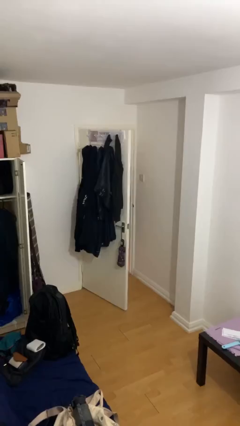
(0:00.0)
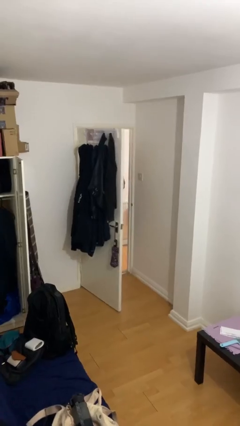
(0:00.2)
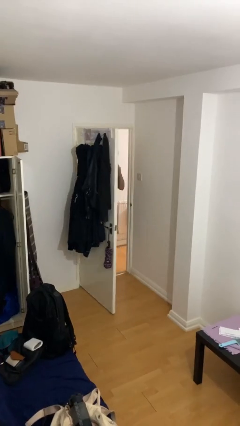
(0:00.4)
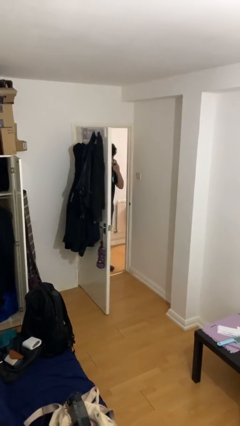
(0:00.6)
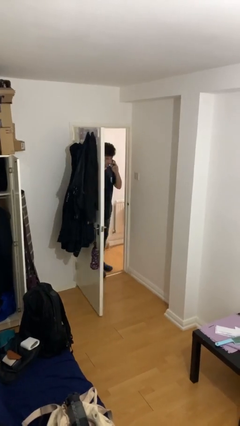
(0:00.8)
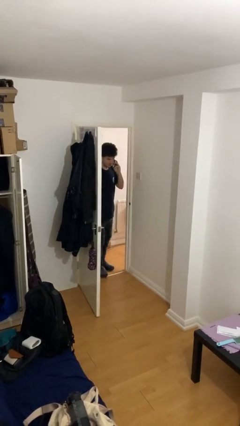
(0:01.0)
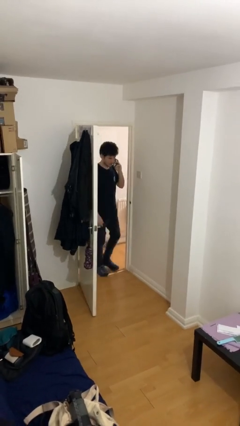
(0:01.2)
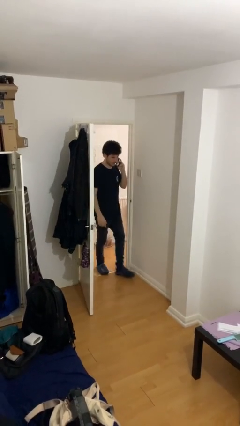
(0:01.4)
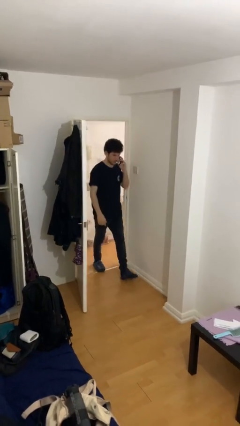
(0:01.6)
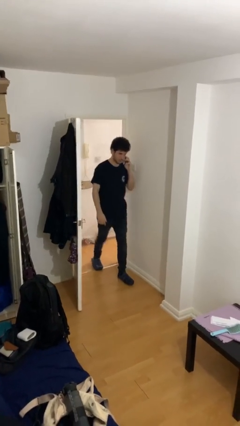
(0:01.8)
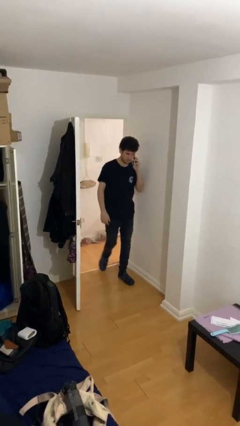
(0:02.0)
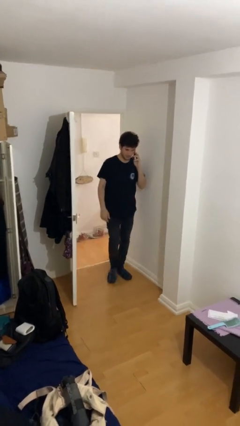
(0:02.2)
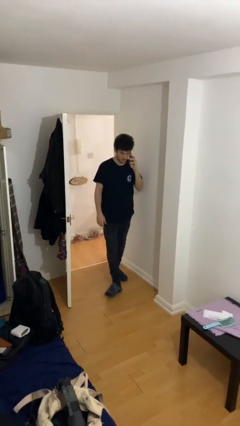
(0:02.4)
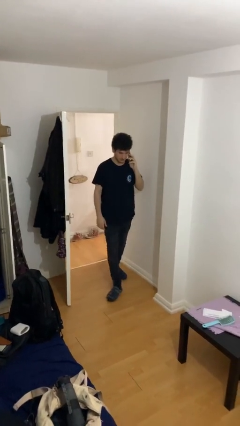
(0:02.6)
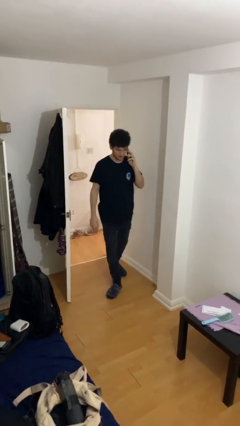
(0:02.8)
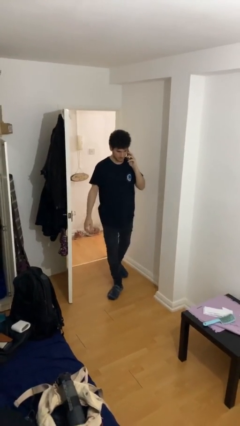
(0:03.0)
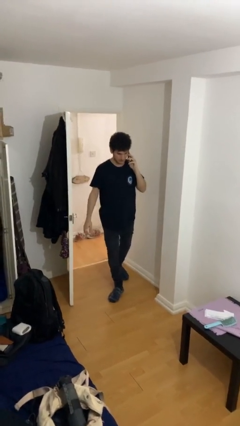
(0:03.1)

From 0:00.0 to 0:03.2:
person enters scene through structure

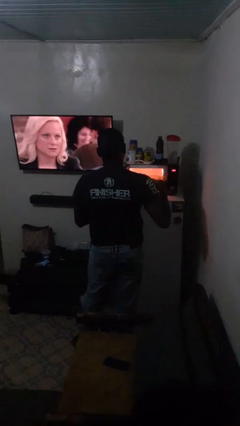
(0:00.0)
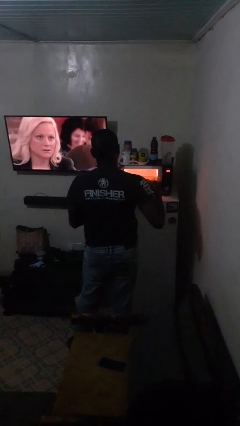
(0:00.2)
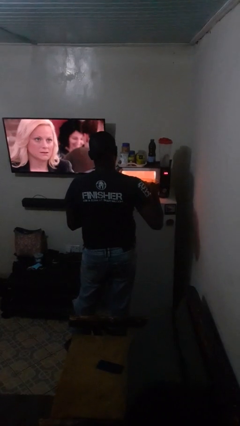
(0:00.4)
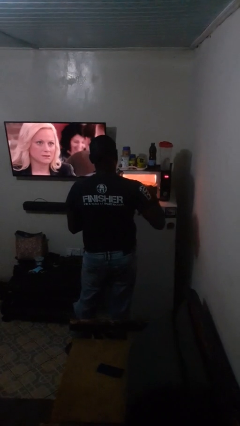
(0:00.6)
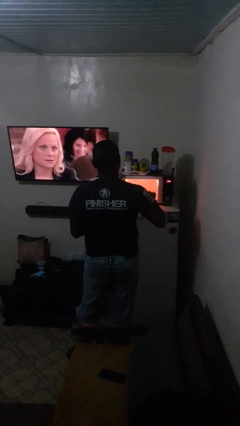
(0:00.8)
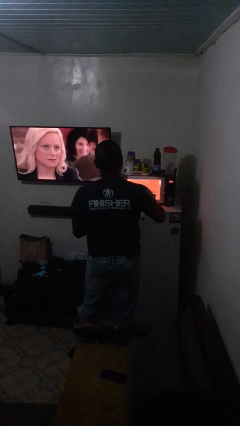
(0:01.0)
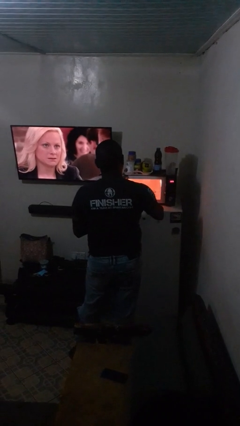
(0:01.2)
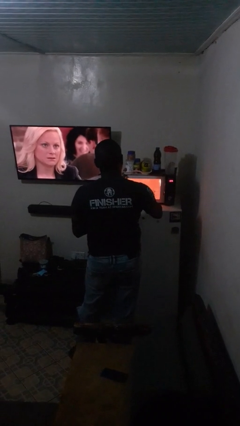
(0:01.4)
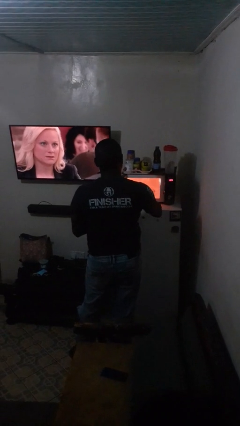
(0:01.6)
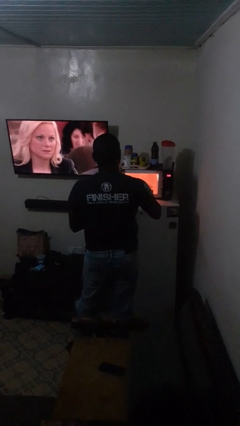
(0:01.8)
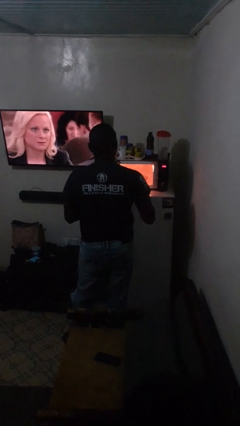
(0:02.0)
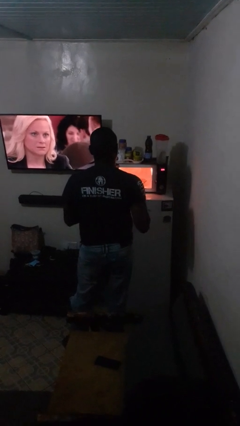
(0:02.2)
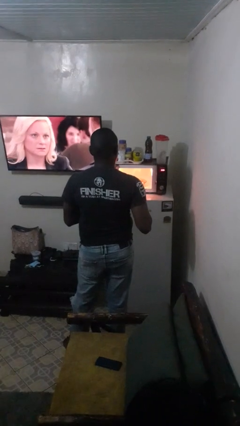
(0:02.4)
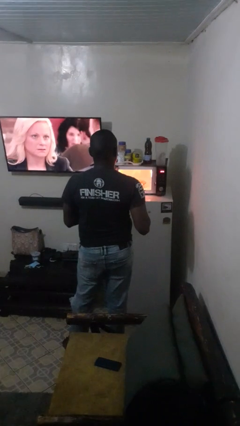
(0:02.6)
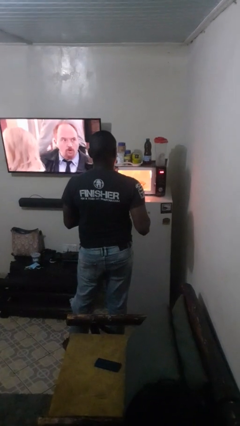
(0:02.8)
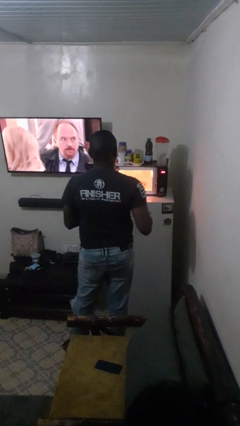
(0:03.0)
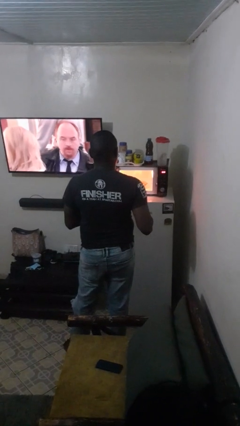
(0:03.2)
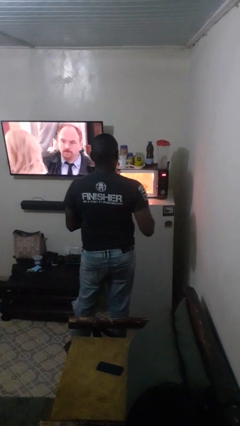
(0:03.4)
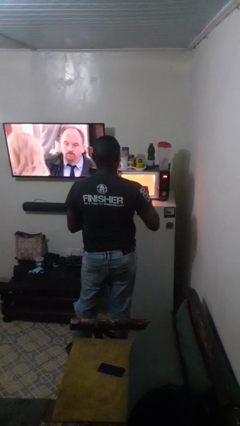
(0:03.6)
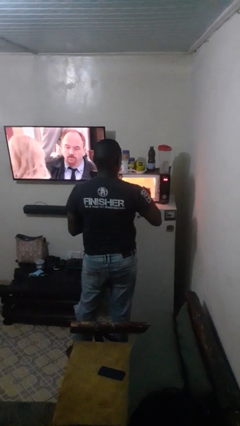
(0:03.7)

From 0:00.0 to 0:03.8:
person puts object into microwave

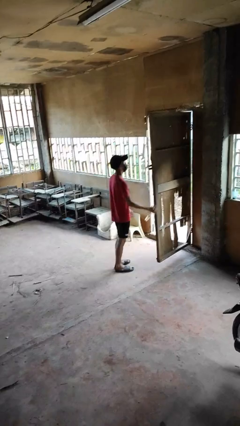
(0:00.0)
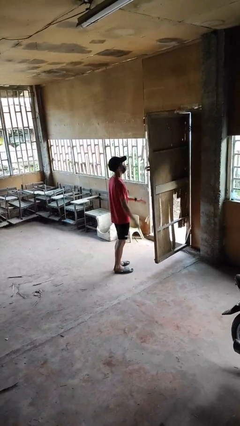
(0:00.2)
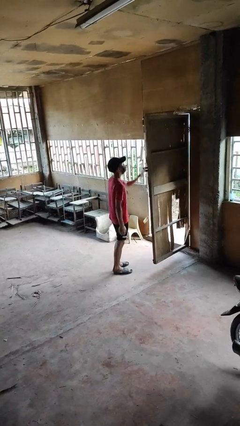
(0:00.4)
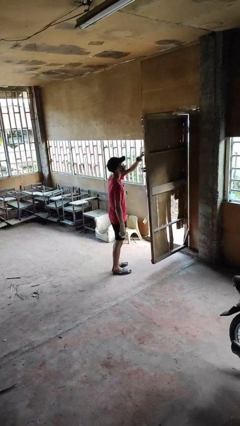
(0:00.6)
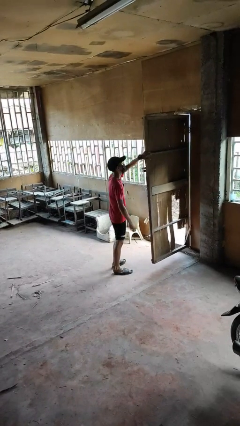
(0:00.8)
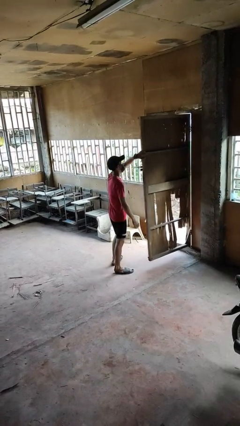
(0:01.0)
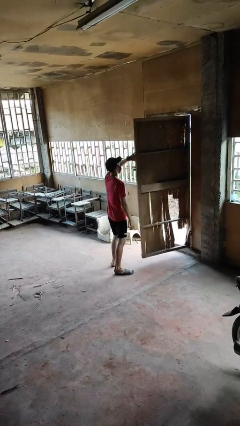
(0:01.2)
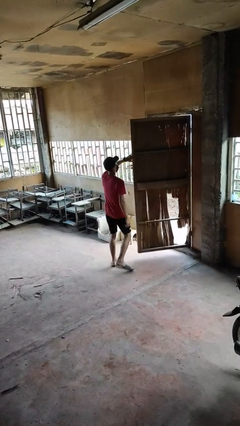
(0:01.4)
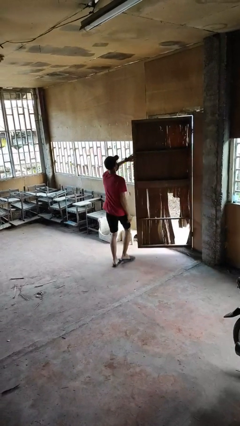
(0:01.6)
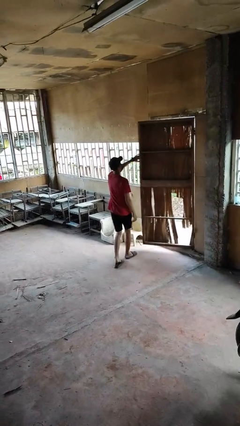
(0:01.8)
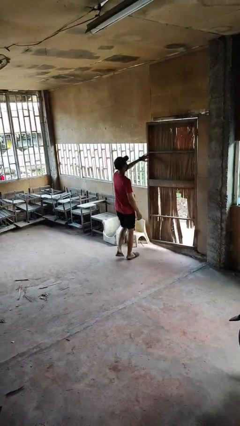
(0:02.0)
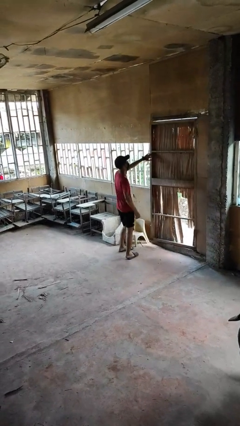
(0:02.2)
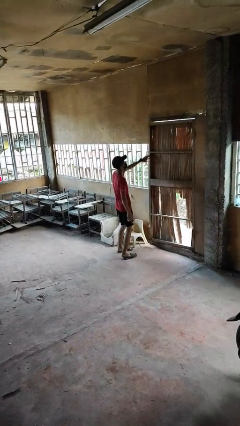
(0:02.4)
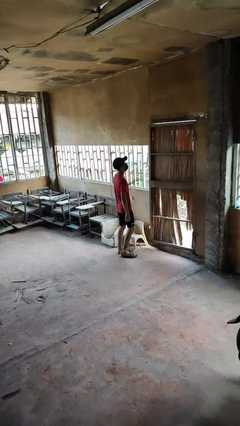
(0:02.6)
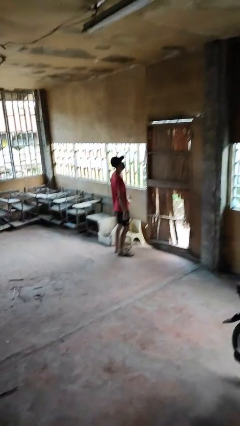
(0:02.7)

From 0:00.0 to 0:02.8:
person closes facility door

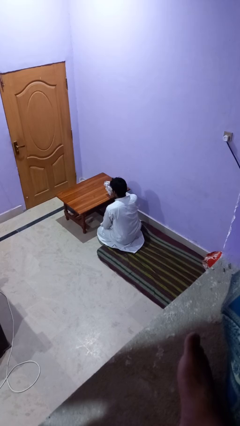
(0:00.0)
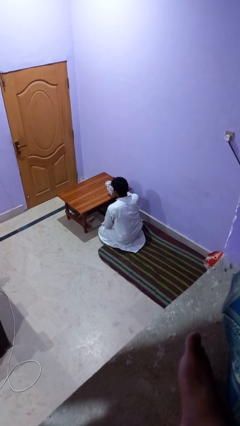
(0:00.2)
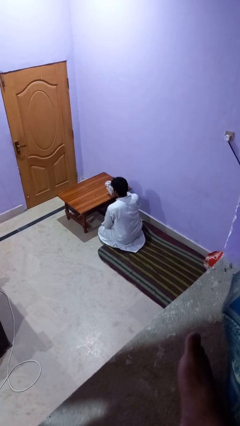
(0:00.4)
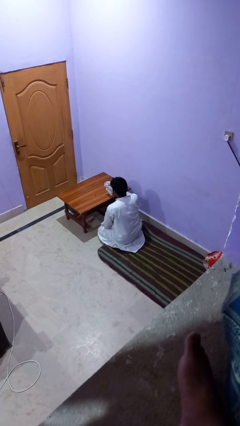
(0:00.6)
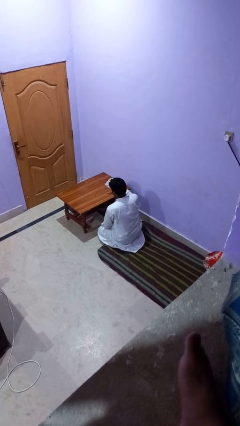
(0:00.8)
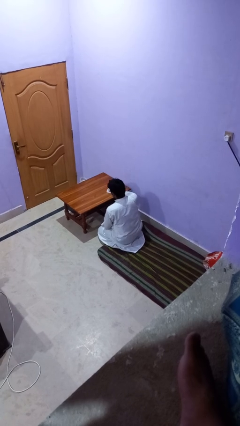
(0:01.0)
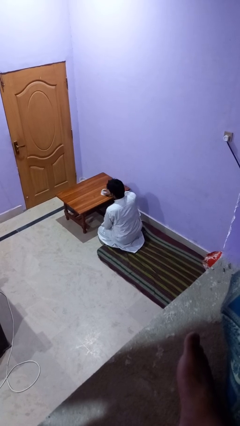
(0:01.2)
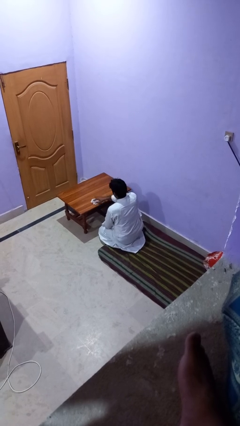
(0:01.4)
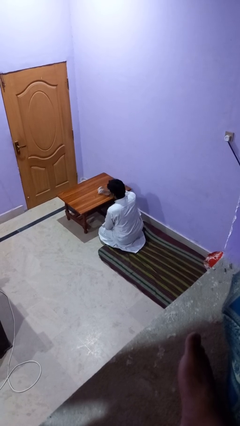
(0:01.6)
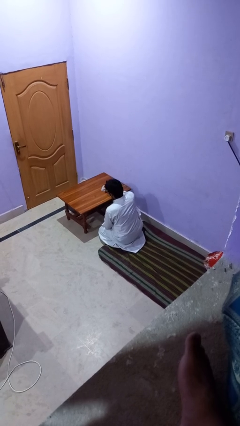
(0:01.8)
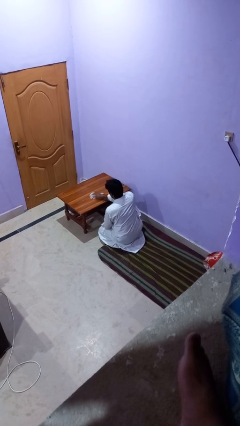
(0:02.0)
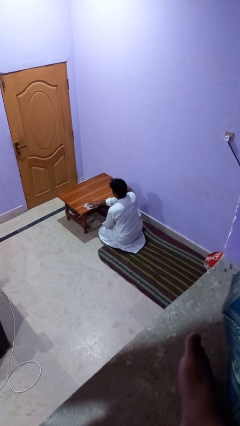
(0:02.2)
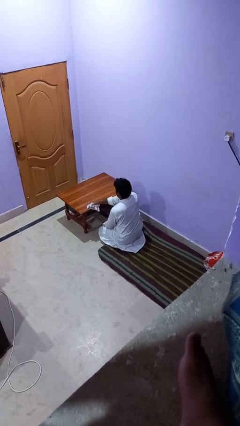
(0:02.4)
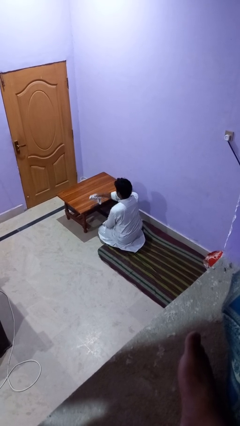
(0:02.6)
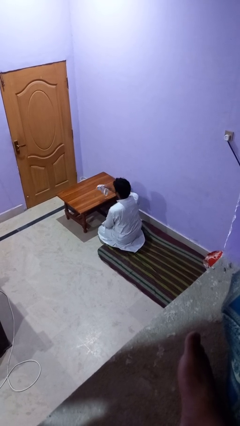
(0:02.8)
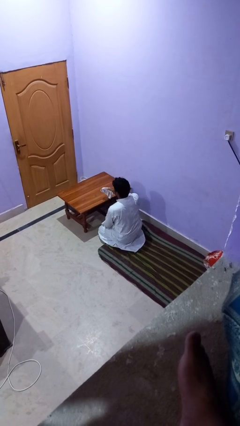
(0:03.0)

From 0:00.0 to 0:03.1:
person cleans table with rag

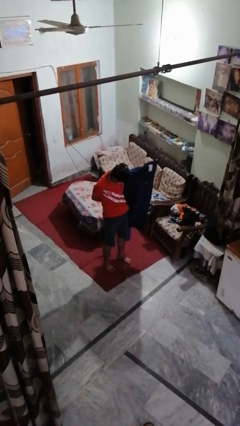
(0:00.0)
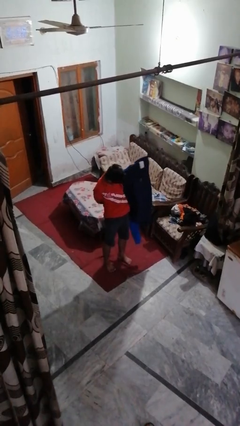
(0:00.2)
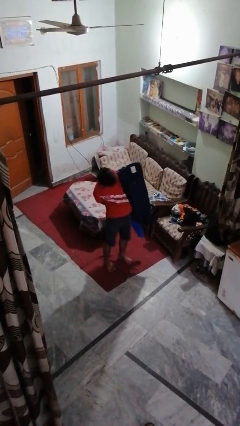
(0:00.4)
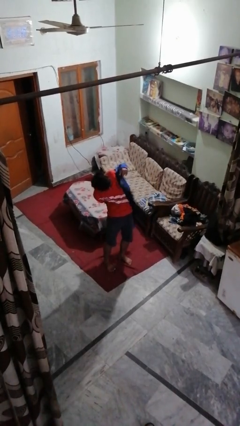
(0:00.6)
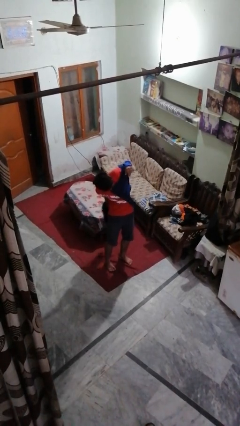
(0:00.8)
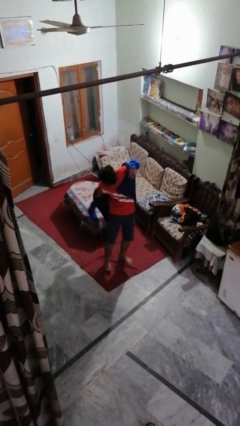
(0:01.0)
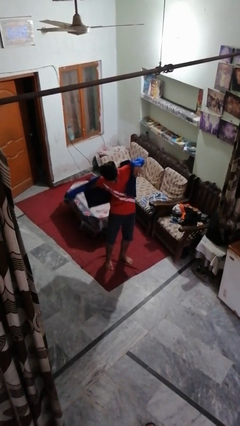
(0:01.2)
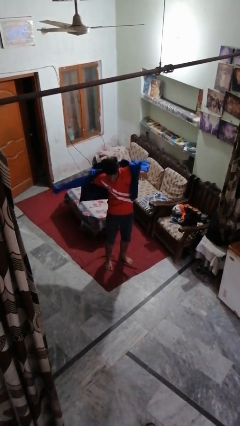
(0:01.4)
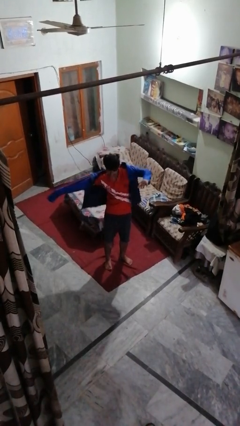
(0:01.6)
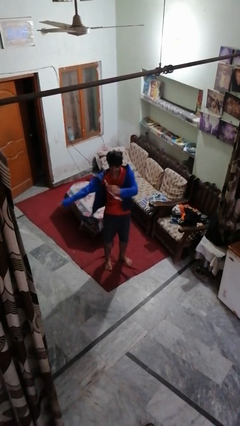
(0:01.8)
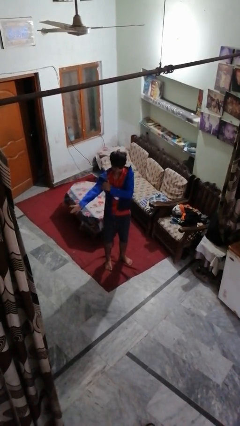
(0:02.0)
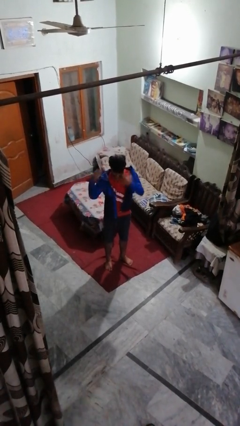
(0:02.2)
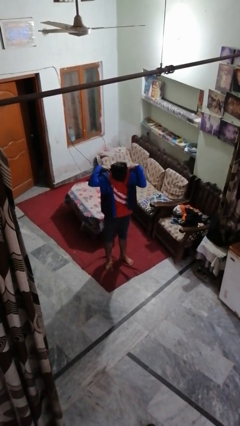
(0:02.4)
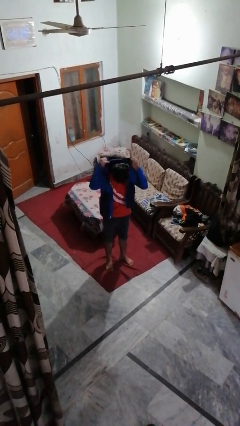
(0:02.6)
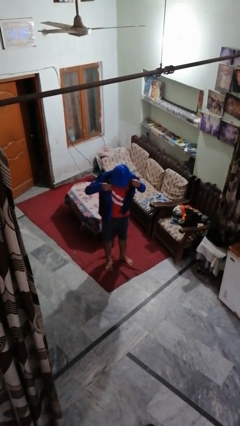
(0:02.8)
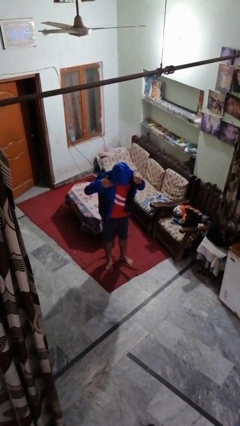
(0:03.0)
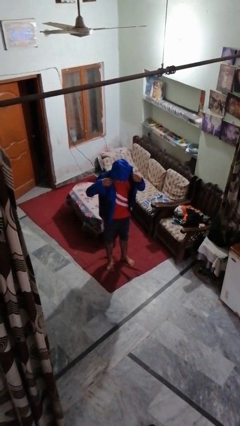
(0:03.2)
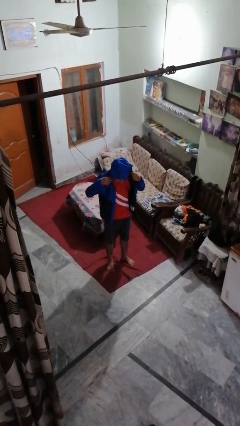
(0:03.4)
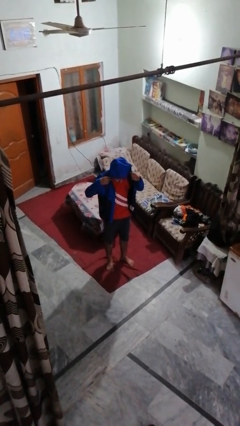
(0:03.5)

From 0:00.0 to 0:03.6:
person puts on hoodie

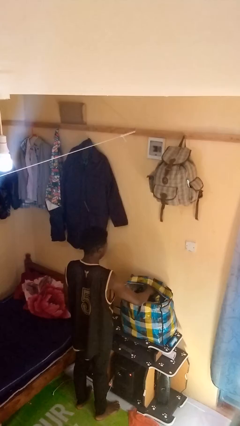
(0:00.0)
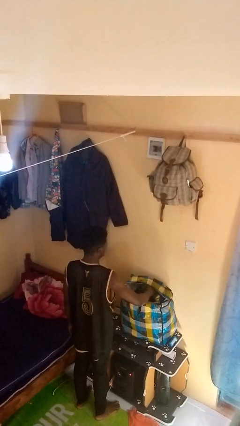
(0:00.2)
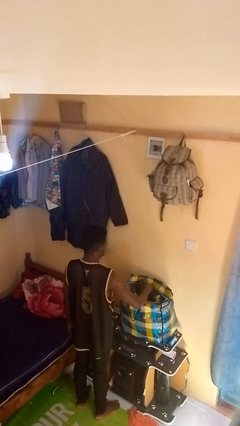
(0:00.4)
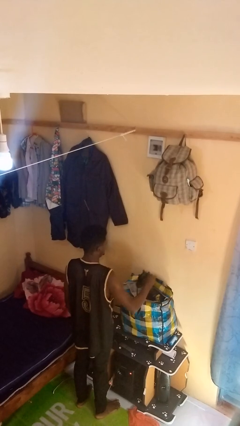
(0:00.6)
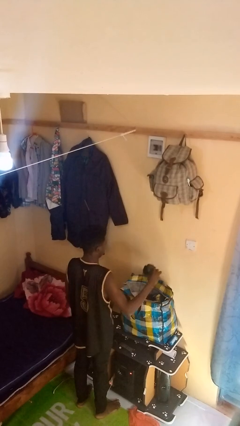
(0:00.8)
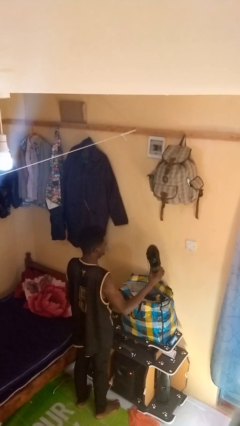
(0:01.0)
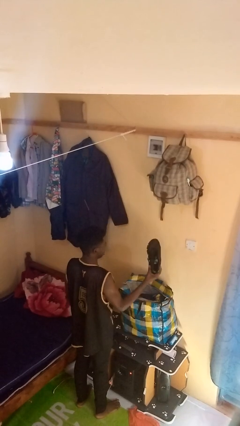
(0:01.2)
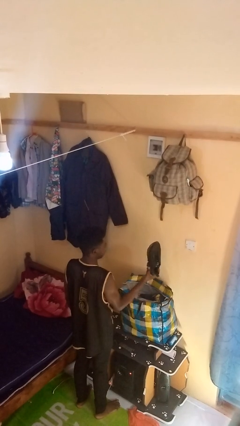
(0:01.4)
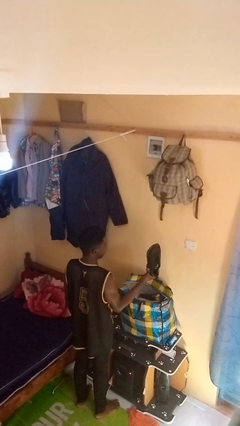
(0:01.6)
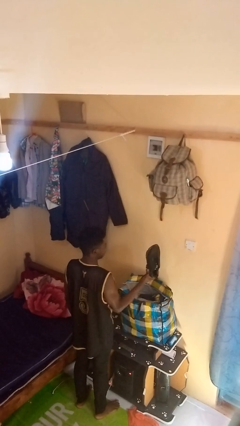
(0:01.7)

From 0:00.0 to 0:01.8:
person takes object from bag
